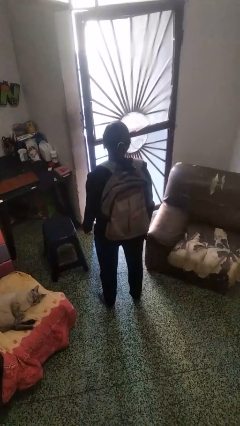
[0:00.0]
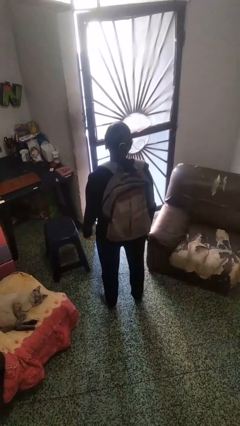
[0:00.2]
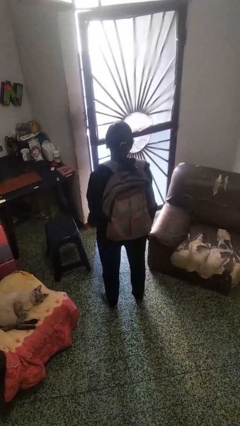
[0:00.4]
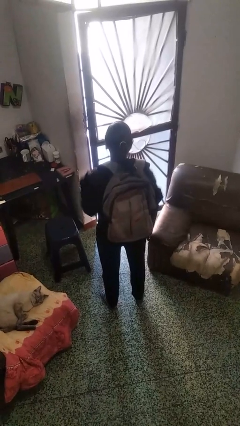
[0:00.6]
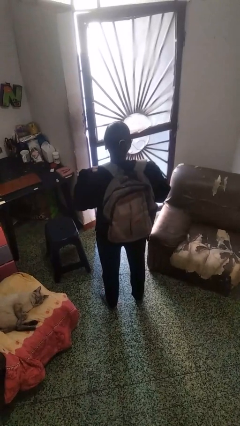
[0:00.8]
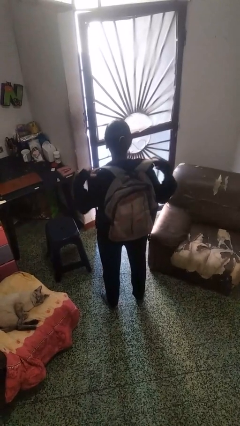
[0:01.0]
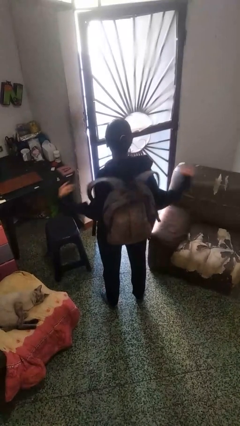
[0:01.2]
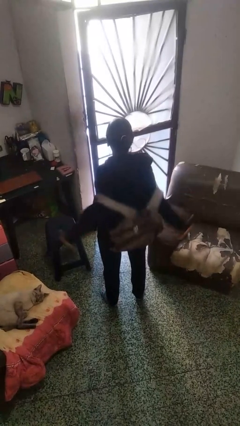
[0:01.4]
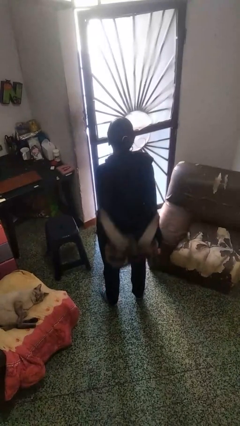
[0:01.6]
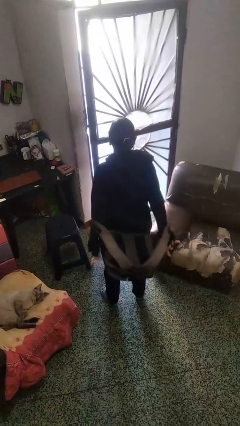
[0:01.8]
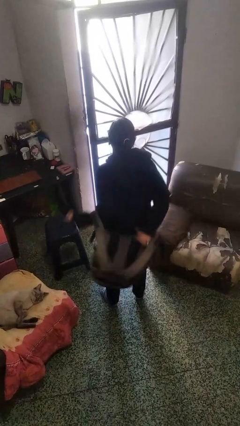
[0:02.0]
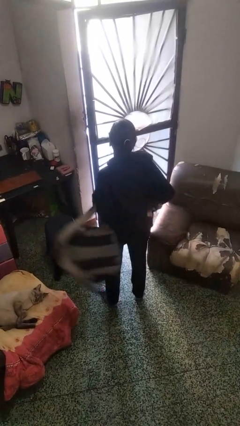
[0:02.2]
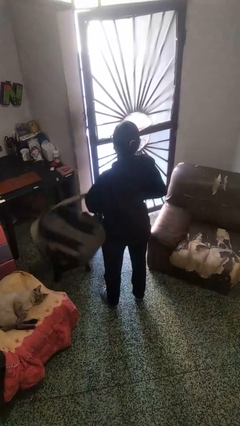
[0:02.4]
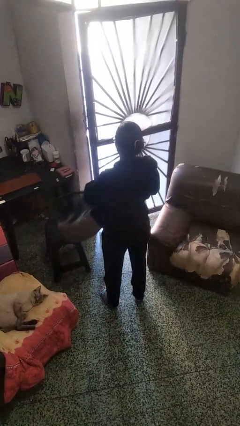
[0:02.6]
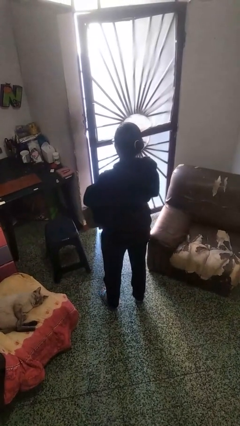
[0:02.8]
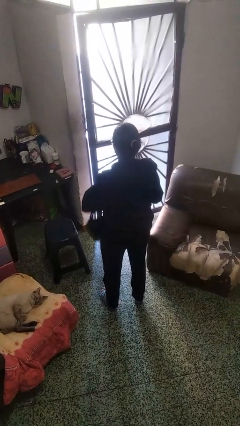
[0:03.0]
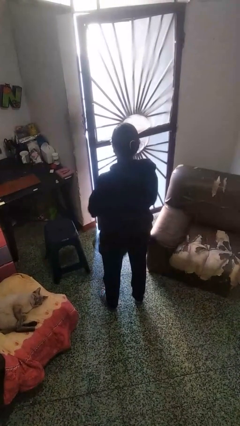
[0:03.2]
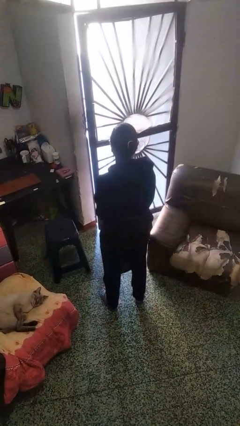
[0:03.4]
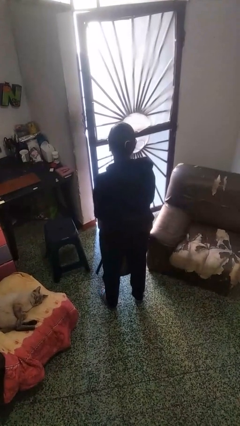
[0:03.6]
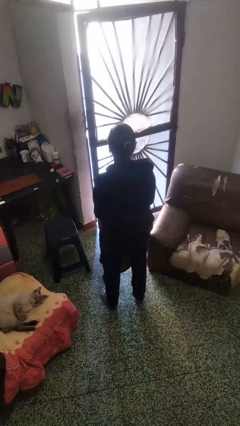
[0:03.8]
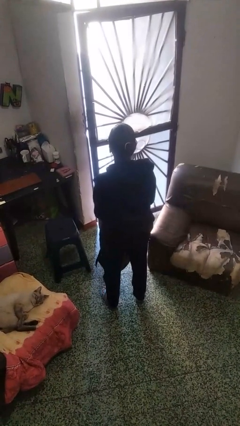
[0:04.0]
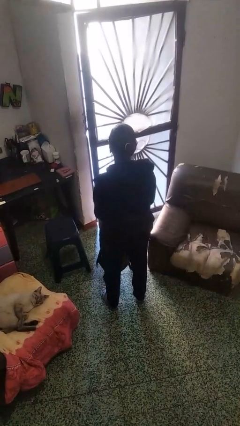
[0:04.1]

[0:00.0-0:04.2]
person takes off backpack

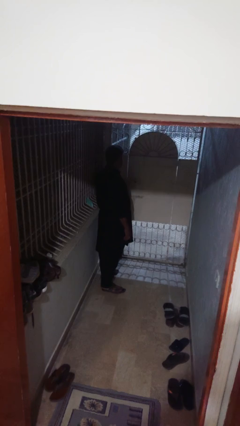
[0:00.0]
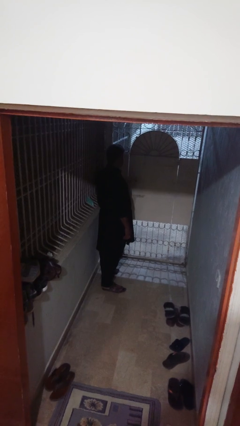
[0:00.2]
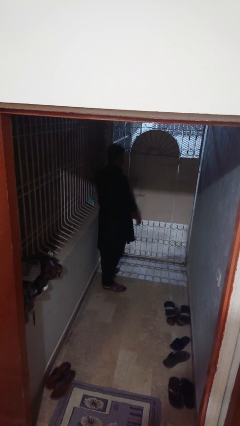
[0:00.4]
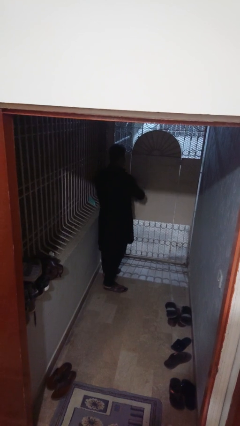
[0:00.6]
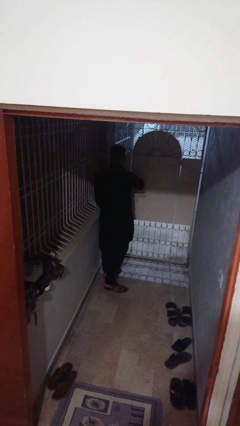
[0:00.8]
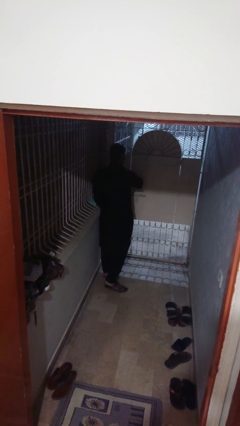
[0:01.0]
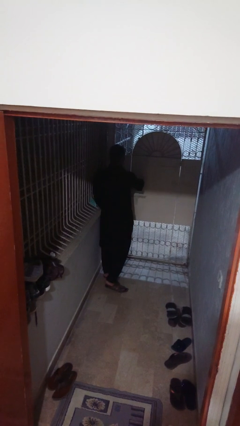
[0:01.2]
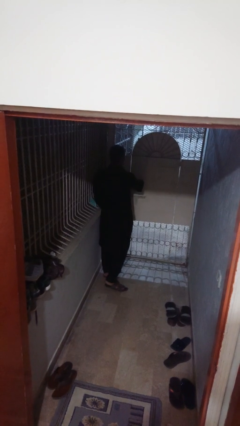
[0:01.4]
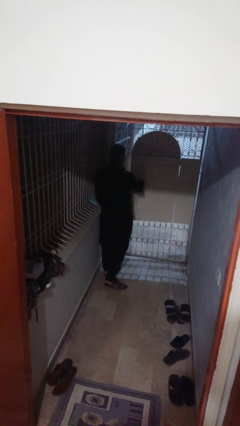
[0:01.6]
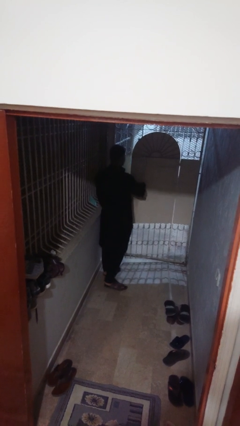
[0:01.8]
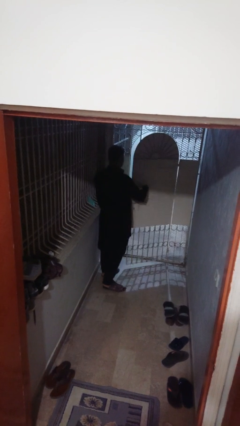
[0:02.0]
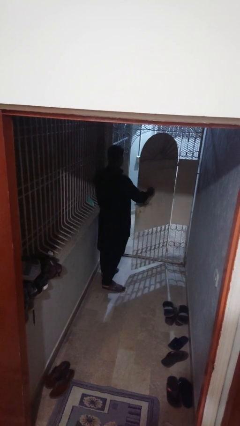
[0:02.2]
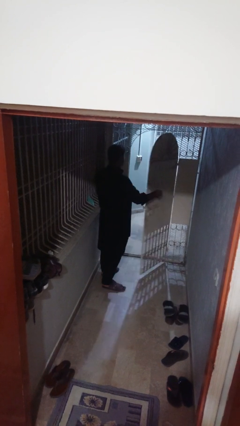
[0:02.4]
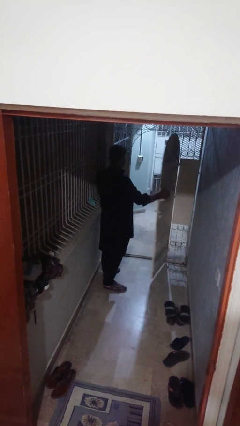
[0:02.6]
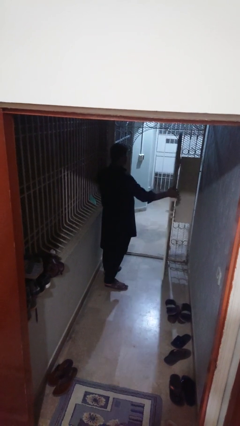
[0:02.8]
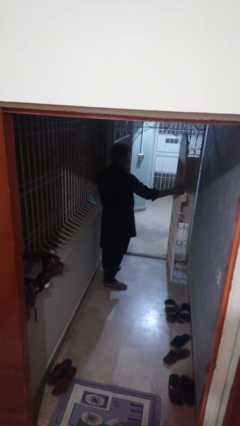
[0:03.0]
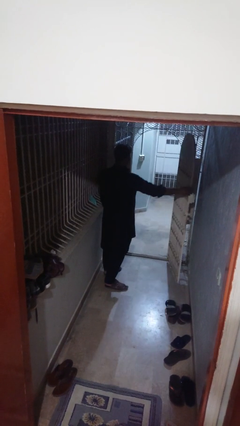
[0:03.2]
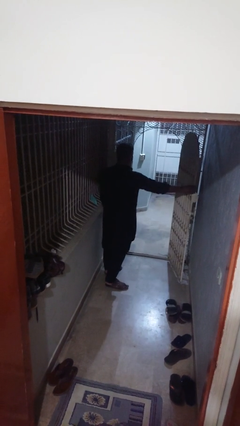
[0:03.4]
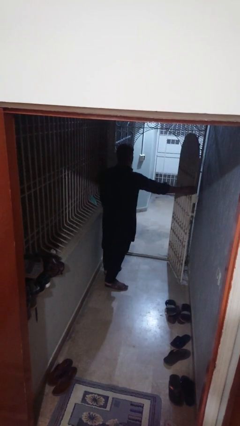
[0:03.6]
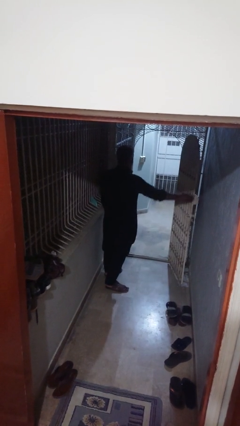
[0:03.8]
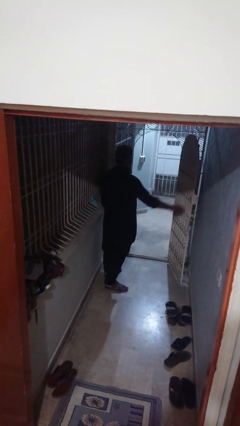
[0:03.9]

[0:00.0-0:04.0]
person opens gate

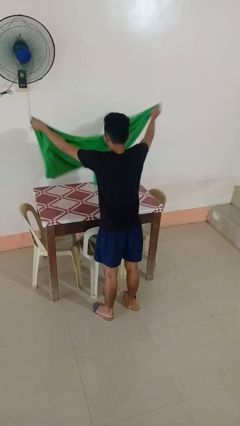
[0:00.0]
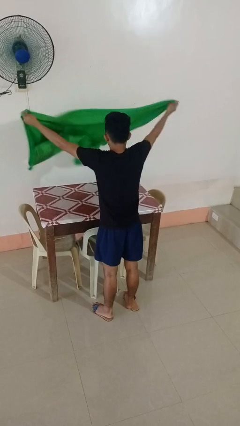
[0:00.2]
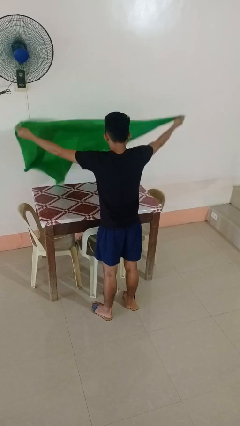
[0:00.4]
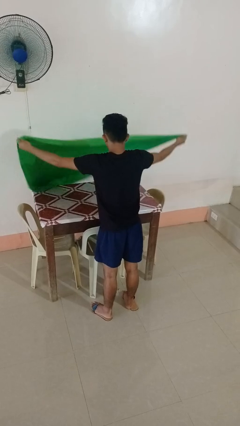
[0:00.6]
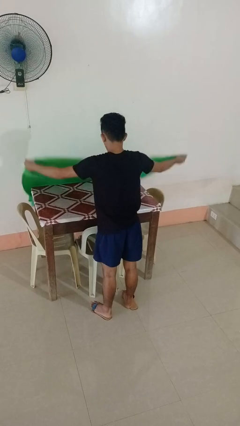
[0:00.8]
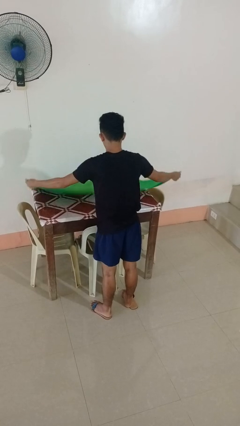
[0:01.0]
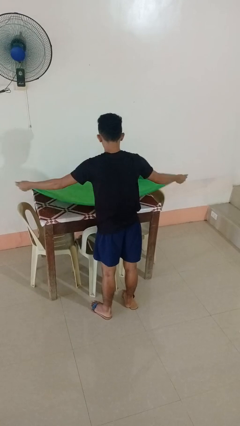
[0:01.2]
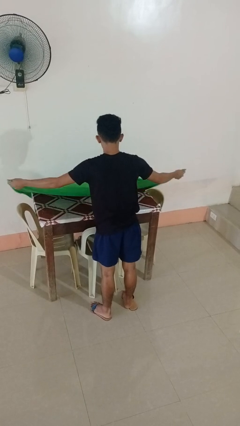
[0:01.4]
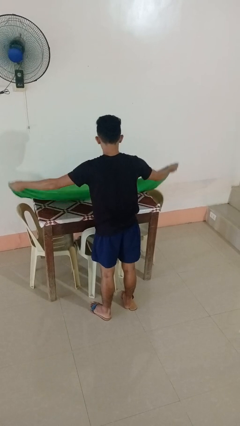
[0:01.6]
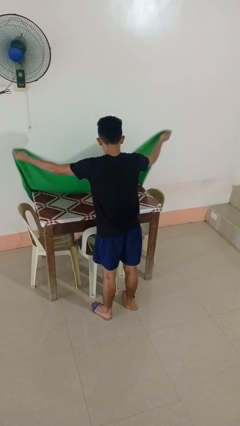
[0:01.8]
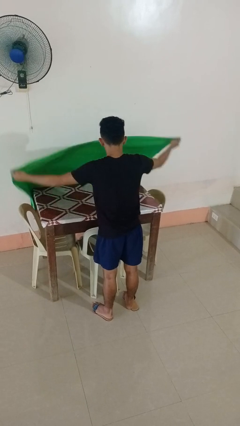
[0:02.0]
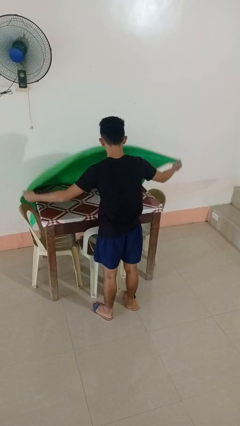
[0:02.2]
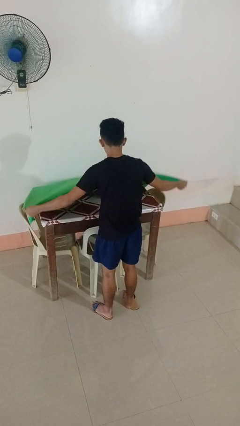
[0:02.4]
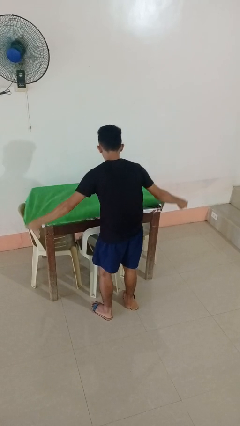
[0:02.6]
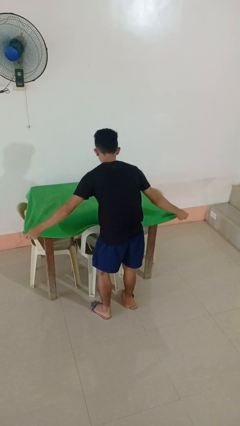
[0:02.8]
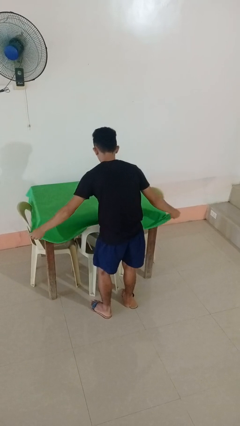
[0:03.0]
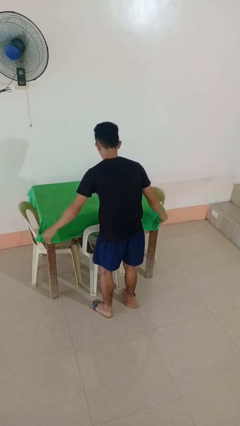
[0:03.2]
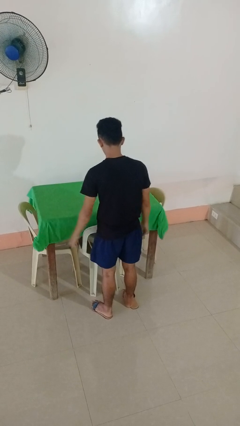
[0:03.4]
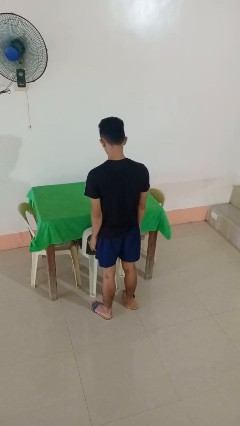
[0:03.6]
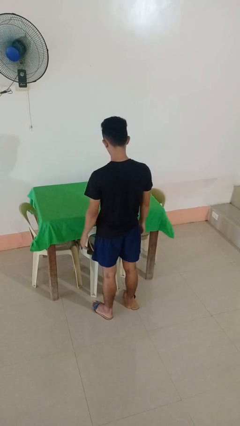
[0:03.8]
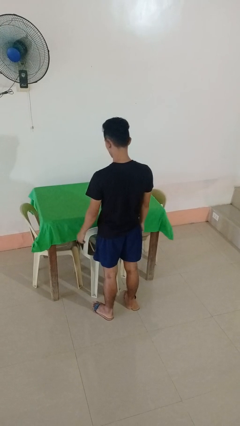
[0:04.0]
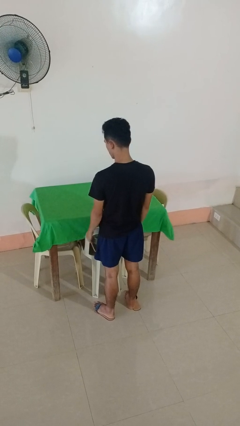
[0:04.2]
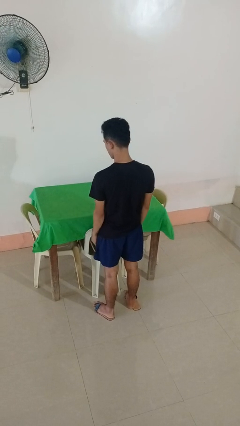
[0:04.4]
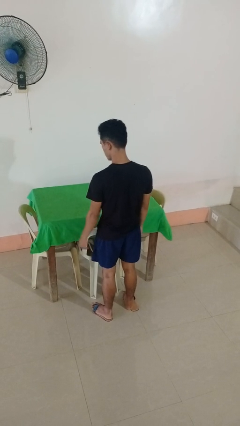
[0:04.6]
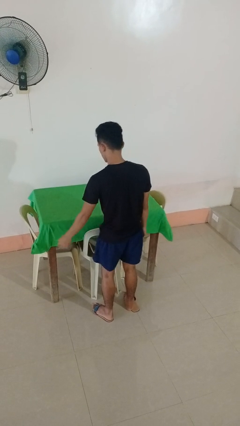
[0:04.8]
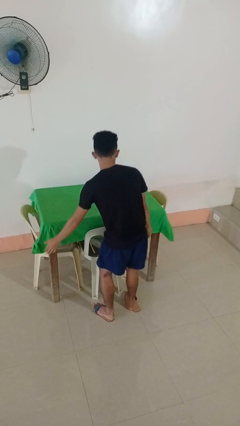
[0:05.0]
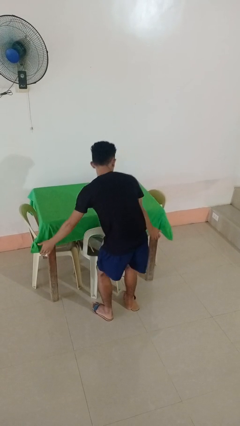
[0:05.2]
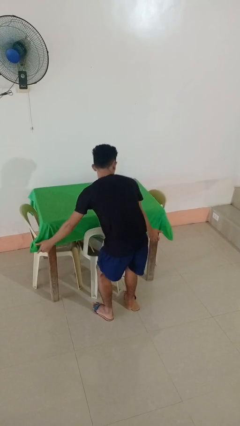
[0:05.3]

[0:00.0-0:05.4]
person spreads tablecloth

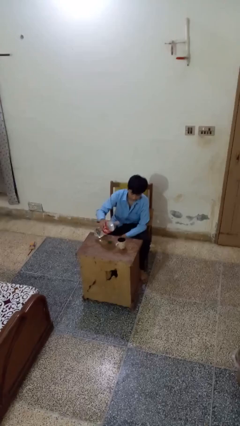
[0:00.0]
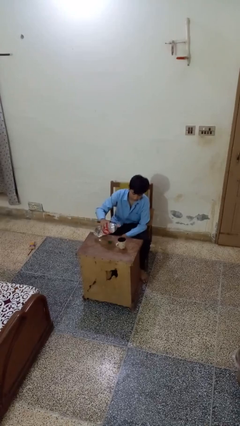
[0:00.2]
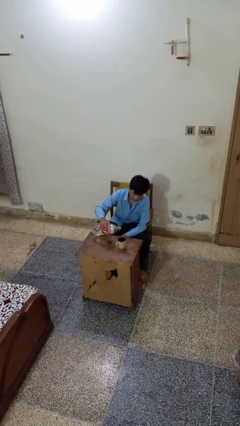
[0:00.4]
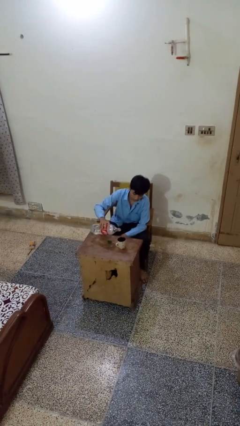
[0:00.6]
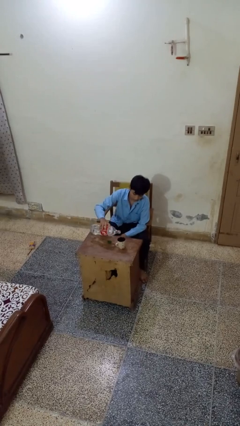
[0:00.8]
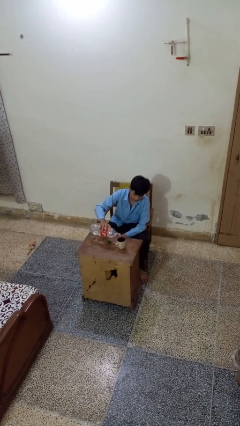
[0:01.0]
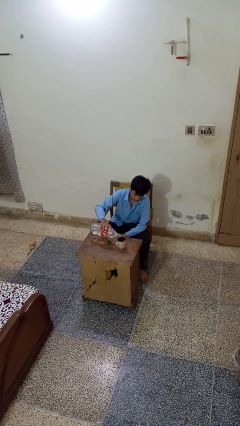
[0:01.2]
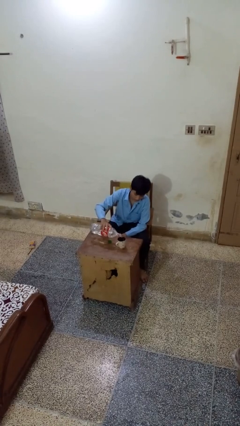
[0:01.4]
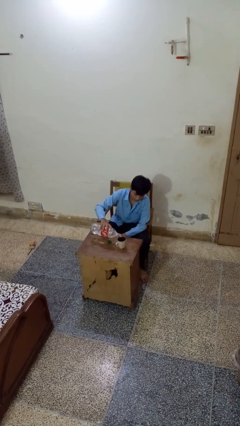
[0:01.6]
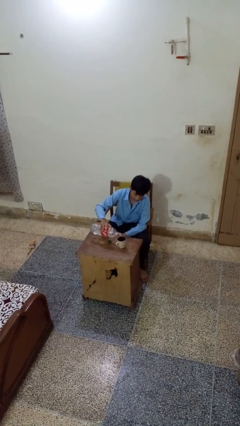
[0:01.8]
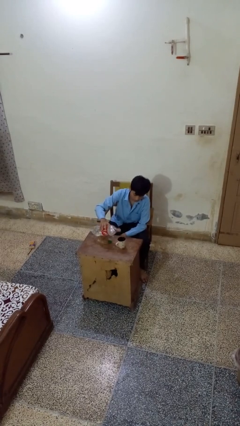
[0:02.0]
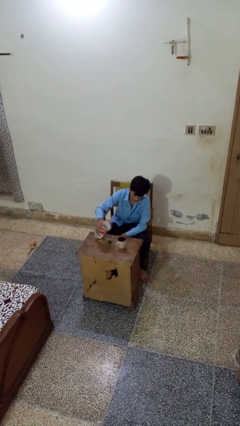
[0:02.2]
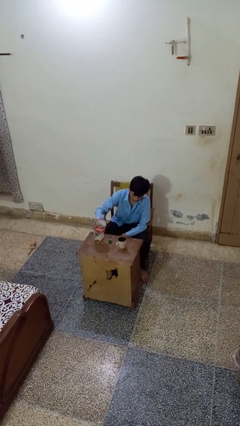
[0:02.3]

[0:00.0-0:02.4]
person pours liquid into cup

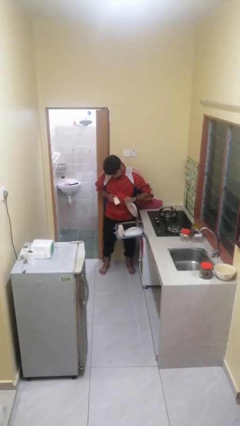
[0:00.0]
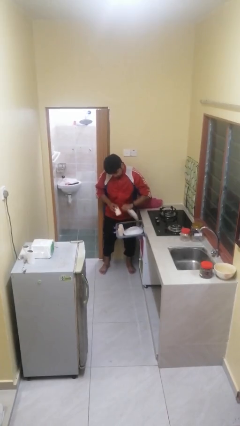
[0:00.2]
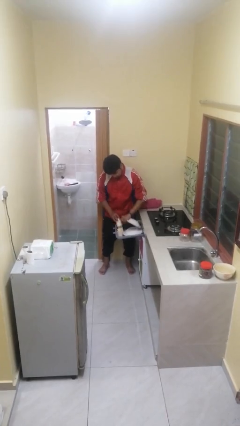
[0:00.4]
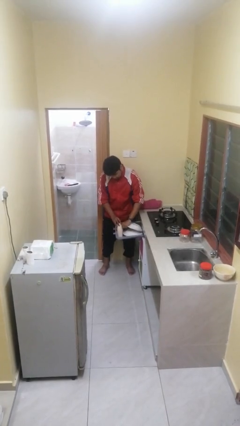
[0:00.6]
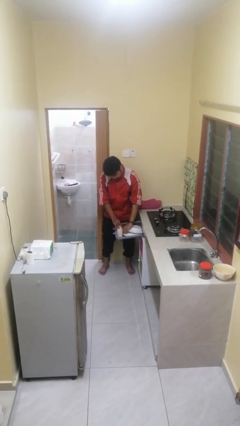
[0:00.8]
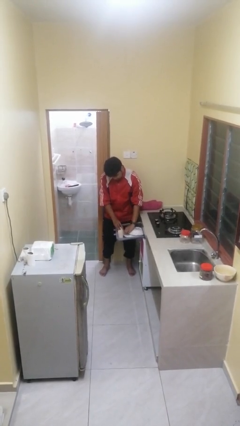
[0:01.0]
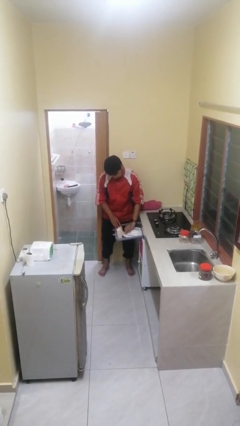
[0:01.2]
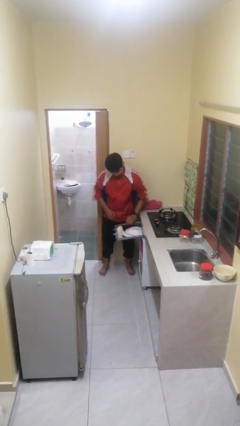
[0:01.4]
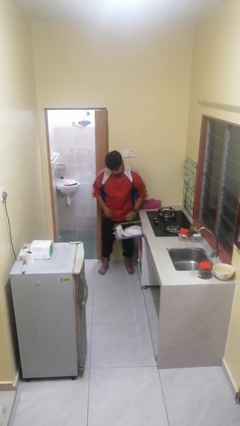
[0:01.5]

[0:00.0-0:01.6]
person puts object into kitchen drawer
